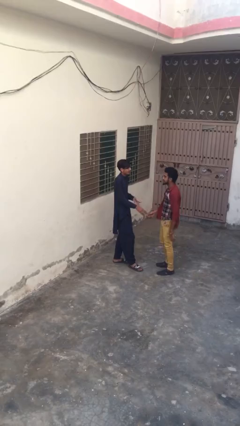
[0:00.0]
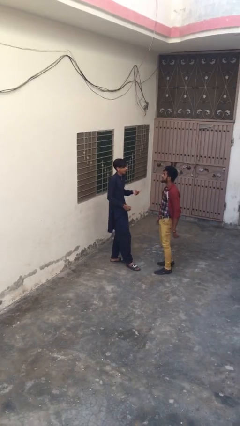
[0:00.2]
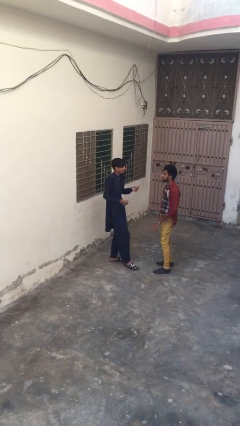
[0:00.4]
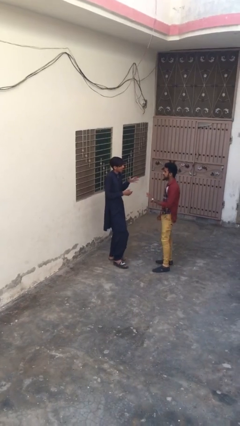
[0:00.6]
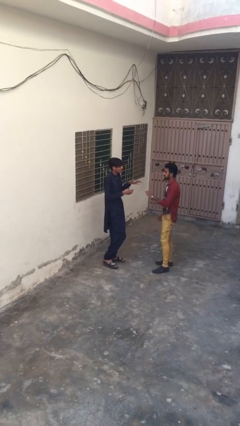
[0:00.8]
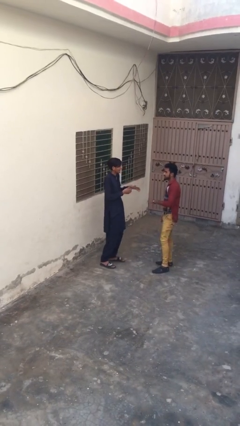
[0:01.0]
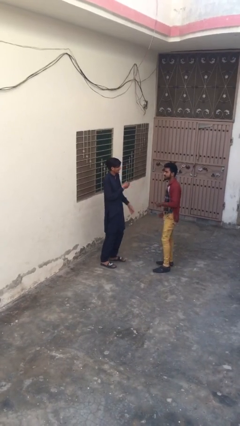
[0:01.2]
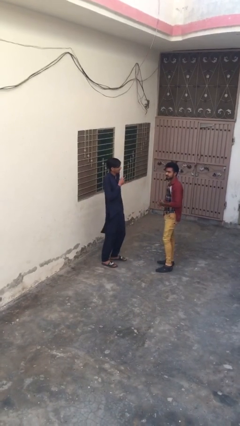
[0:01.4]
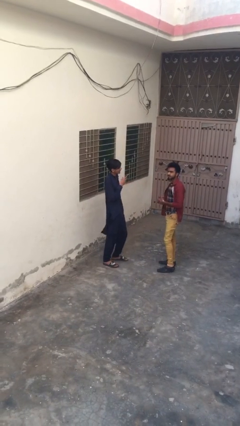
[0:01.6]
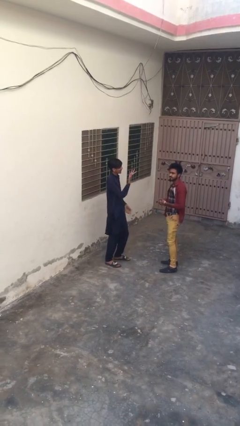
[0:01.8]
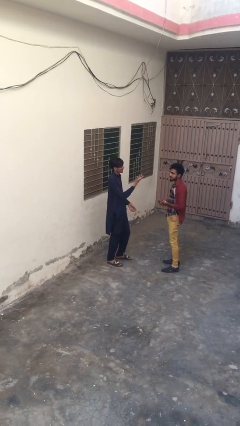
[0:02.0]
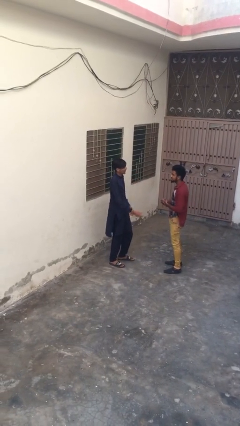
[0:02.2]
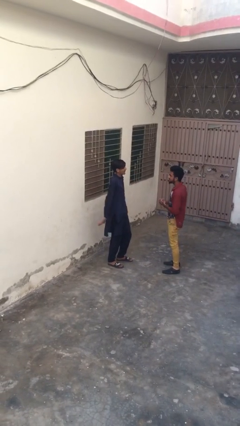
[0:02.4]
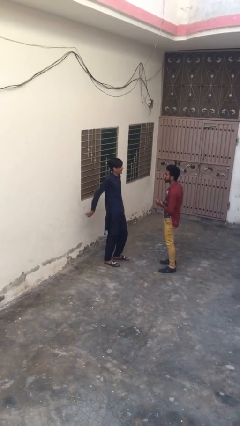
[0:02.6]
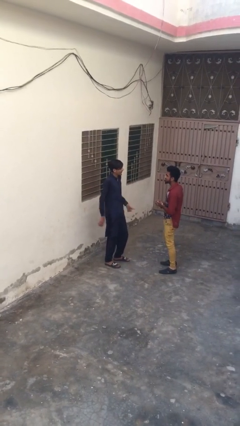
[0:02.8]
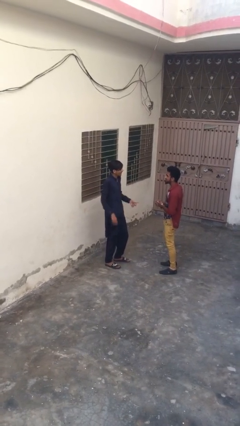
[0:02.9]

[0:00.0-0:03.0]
person talks to person

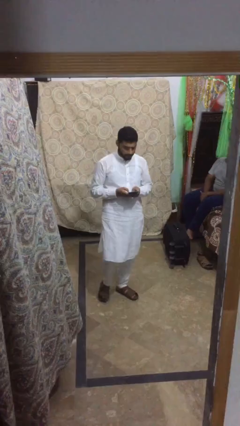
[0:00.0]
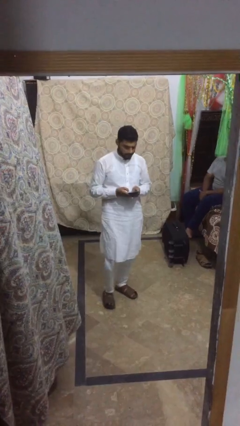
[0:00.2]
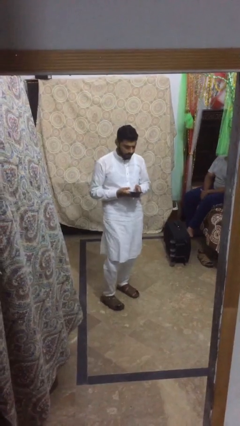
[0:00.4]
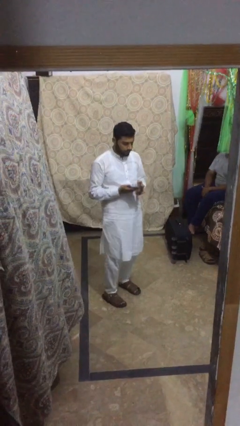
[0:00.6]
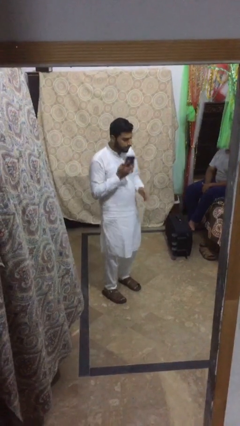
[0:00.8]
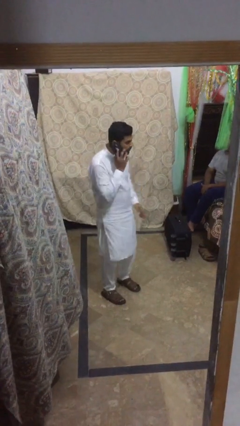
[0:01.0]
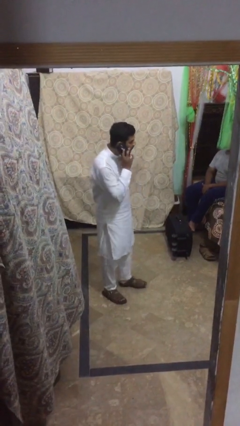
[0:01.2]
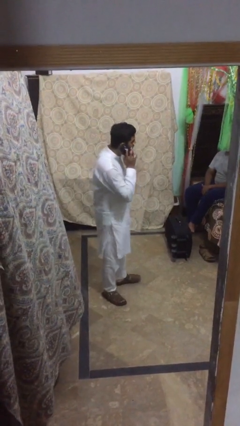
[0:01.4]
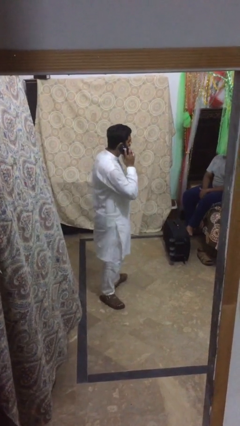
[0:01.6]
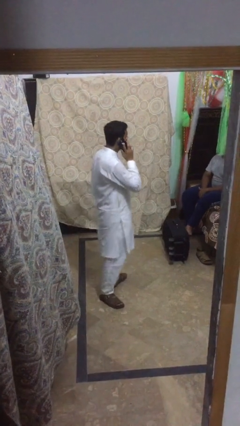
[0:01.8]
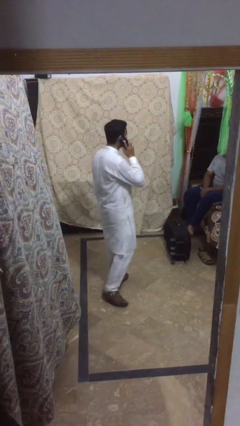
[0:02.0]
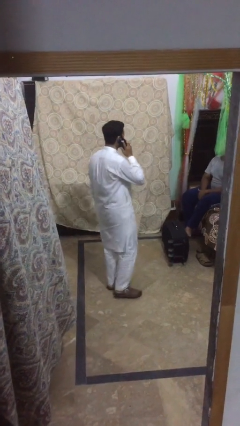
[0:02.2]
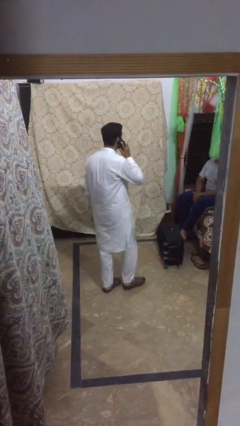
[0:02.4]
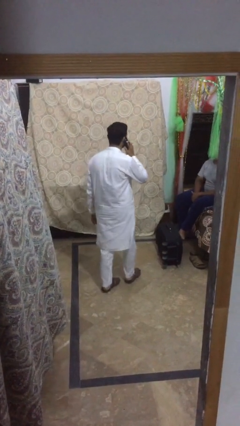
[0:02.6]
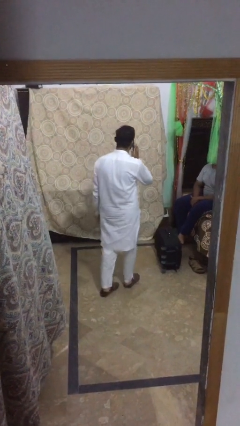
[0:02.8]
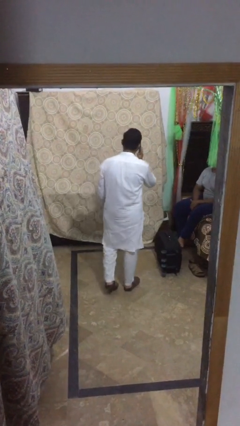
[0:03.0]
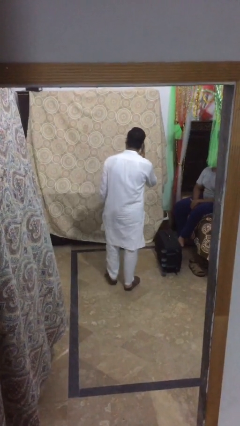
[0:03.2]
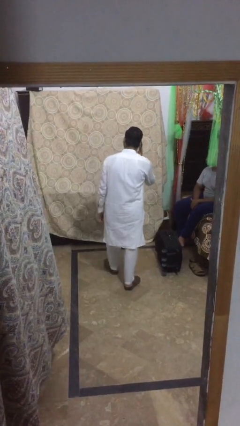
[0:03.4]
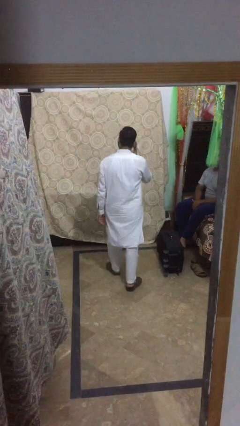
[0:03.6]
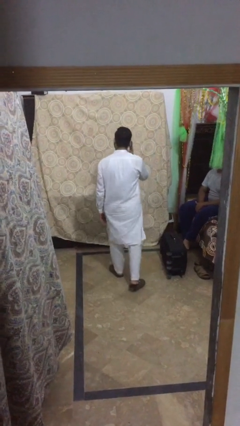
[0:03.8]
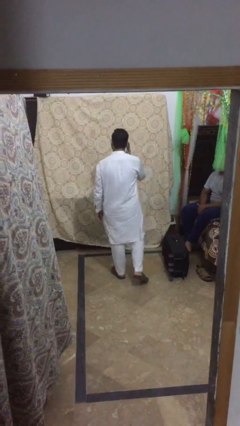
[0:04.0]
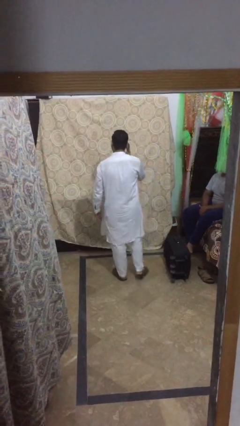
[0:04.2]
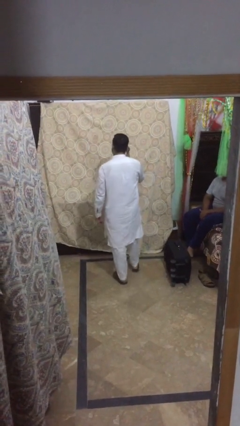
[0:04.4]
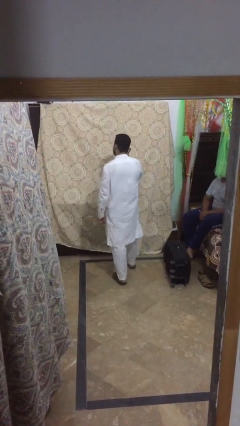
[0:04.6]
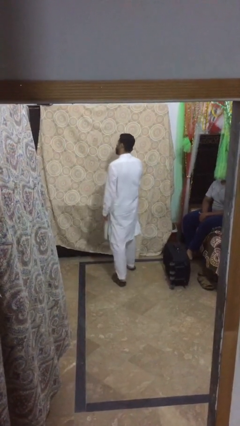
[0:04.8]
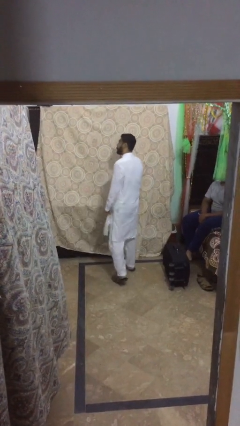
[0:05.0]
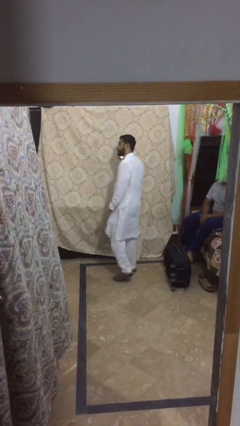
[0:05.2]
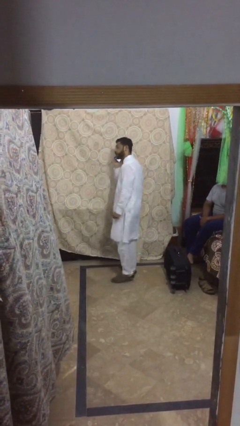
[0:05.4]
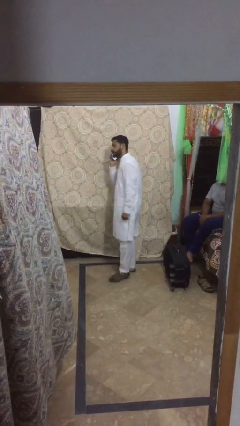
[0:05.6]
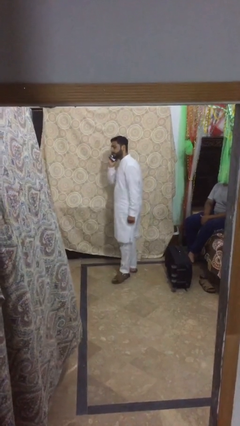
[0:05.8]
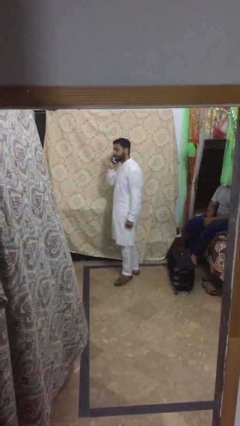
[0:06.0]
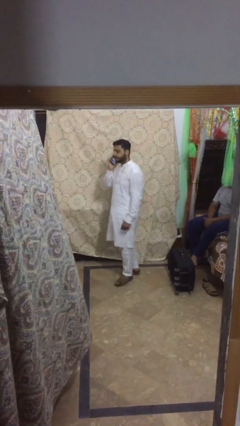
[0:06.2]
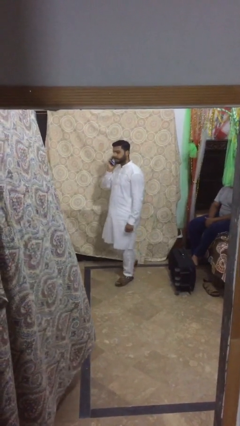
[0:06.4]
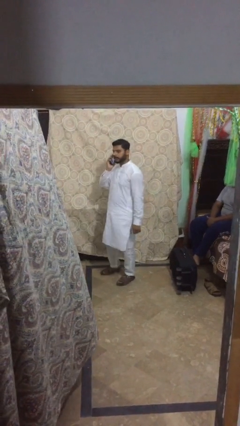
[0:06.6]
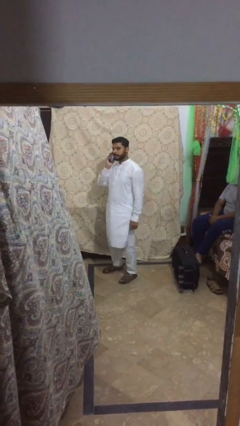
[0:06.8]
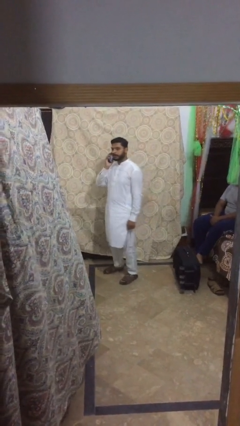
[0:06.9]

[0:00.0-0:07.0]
person talks on phone

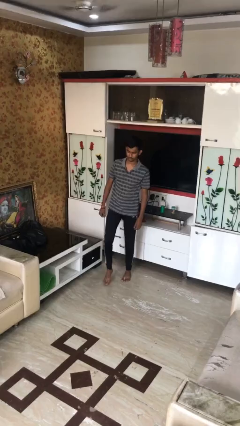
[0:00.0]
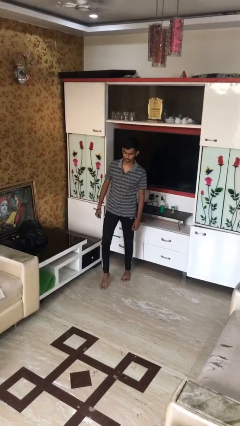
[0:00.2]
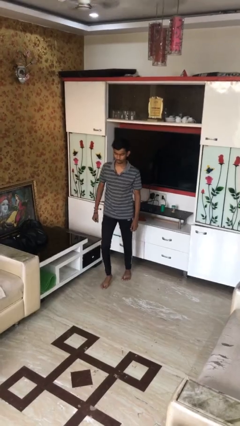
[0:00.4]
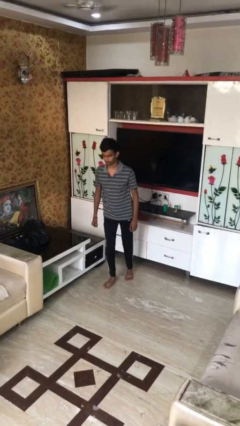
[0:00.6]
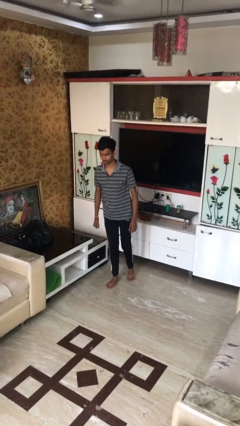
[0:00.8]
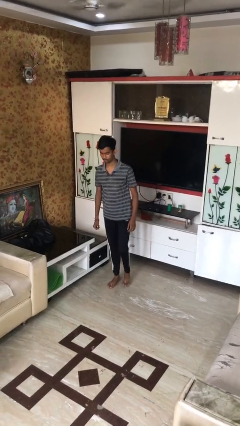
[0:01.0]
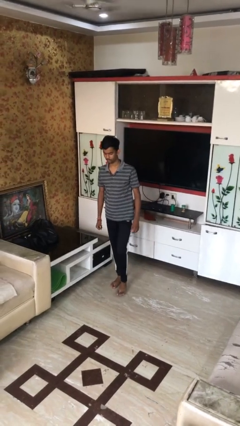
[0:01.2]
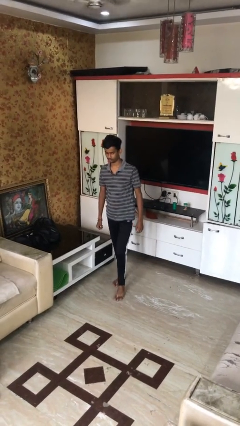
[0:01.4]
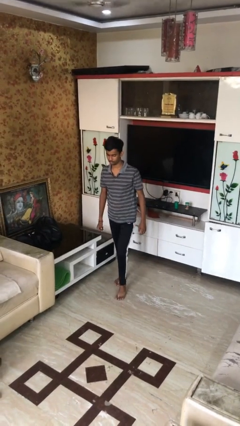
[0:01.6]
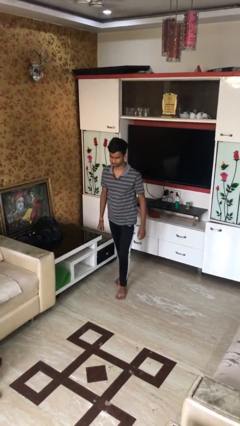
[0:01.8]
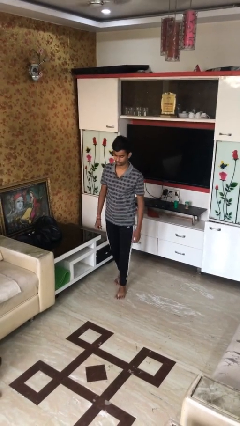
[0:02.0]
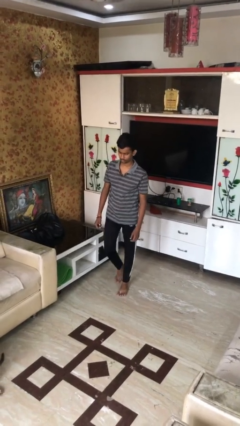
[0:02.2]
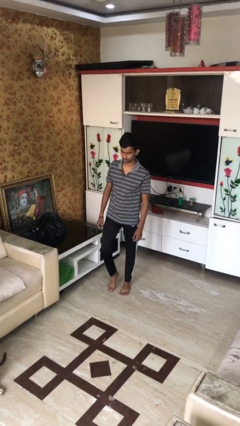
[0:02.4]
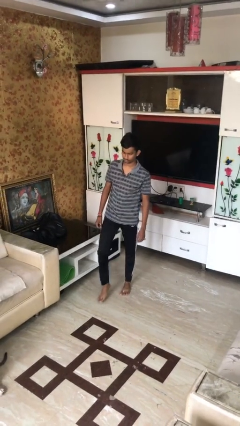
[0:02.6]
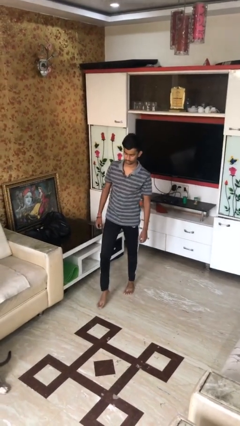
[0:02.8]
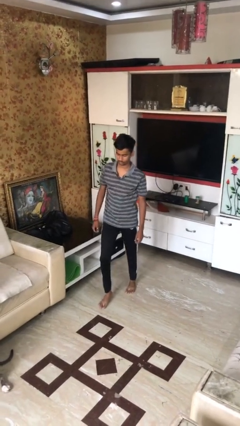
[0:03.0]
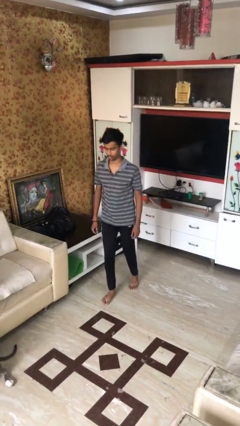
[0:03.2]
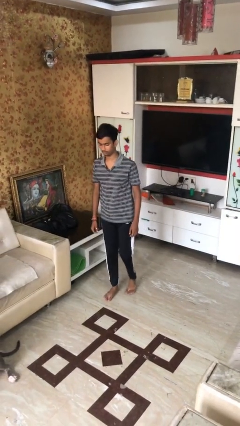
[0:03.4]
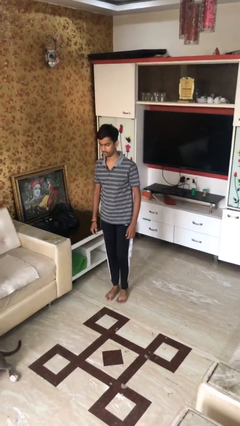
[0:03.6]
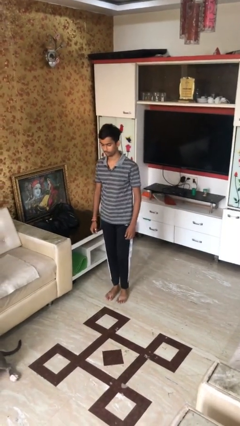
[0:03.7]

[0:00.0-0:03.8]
person walks tiptoe

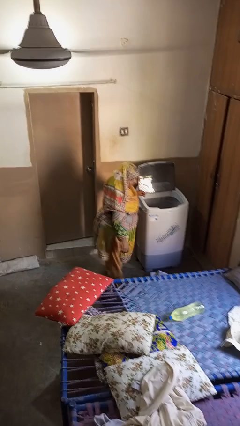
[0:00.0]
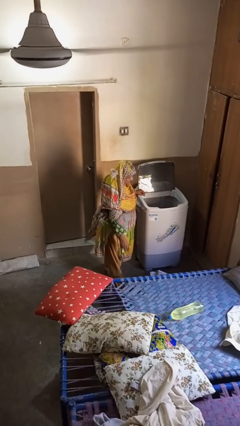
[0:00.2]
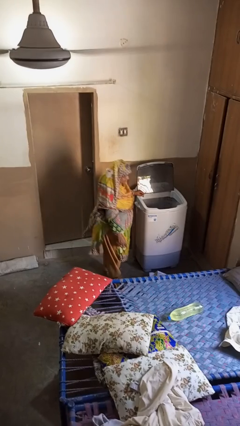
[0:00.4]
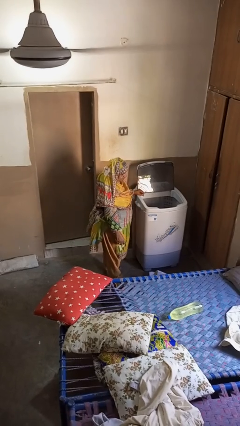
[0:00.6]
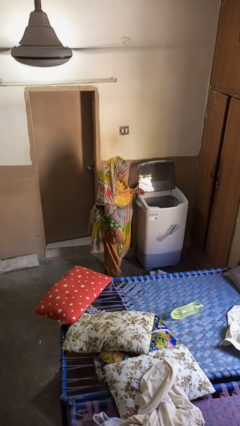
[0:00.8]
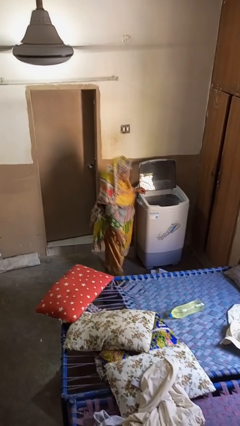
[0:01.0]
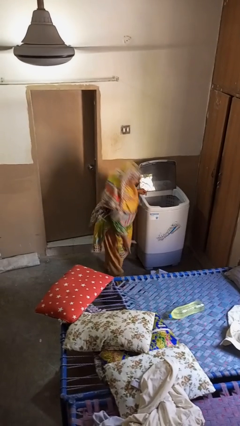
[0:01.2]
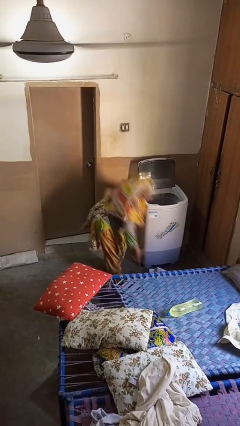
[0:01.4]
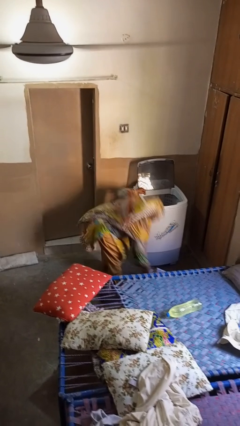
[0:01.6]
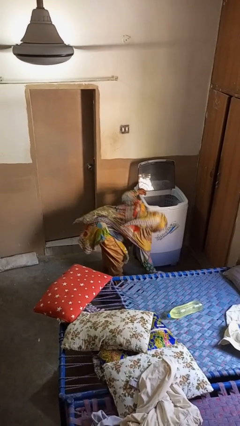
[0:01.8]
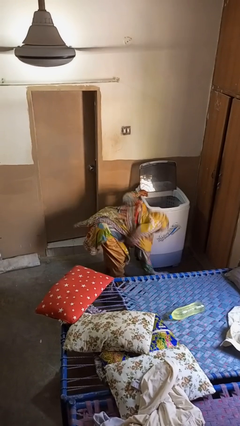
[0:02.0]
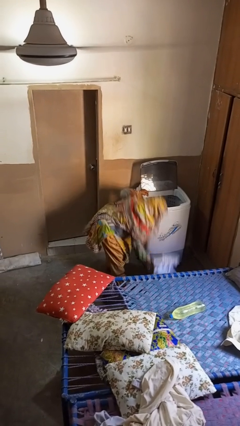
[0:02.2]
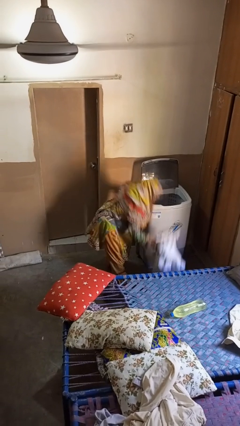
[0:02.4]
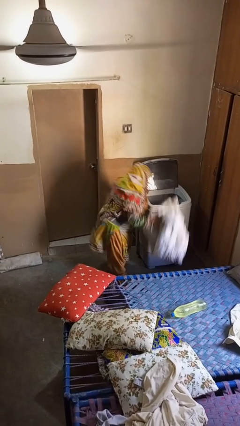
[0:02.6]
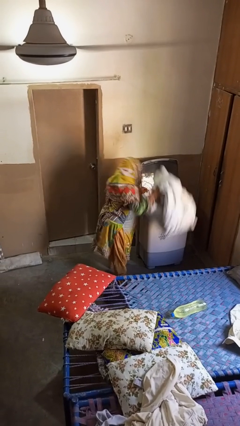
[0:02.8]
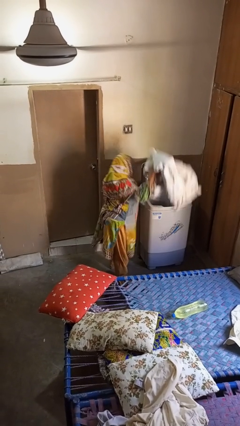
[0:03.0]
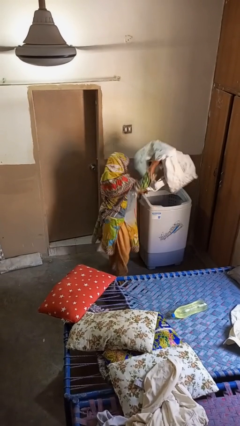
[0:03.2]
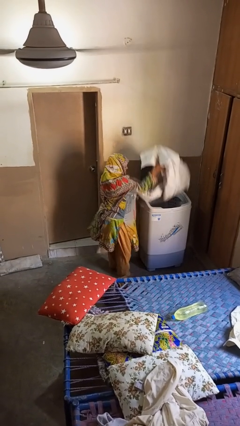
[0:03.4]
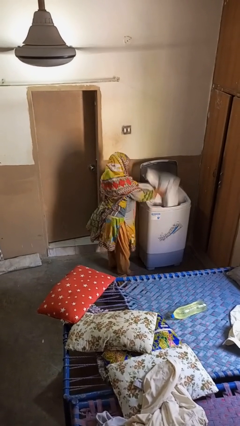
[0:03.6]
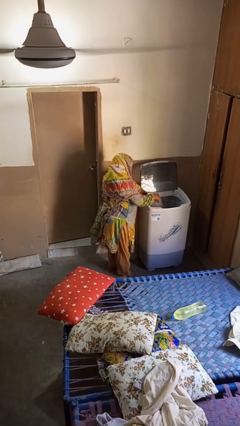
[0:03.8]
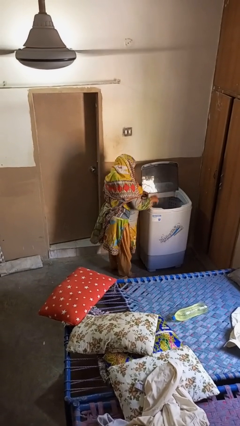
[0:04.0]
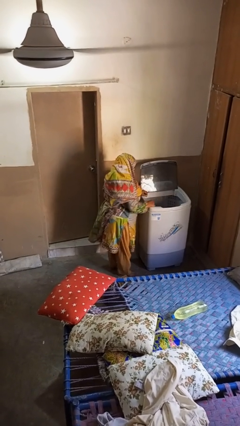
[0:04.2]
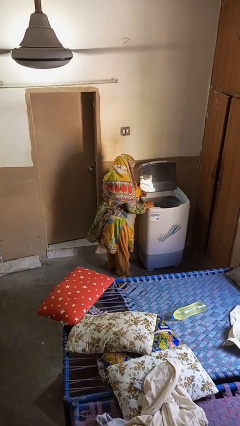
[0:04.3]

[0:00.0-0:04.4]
person loads clotheswasher
